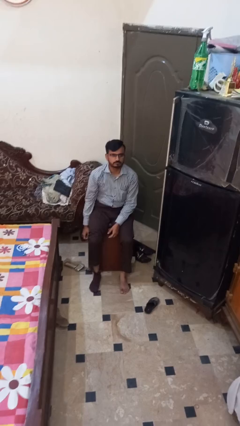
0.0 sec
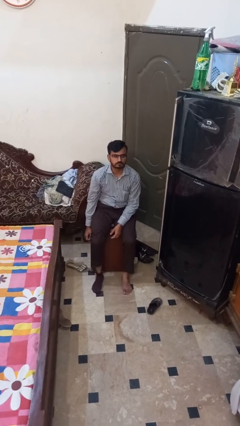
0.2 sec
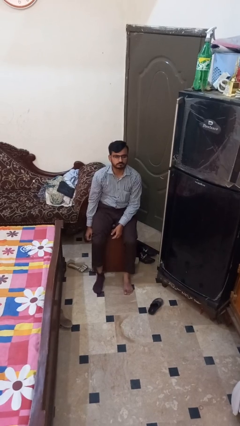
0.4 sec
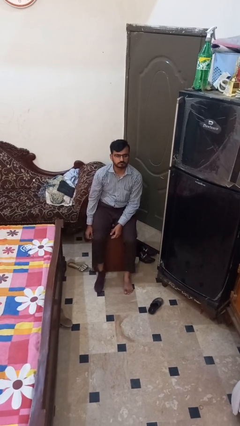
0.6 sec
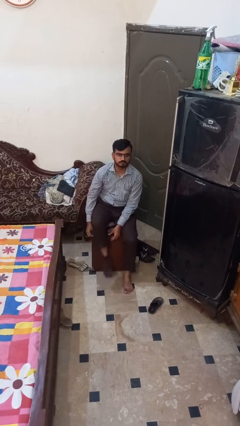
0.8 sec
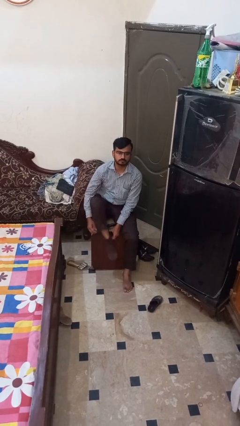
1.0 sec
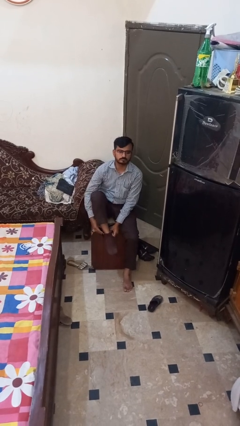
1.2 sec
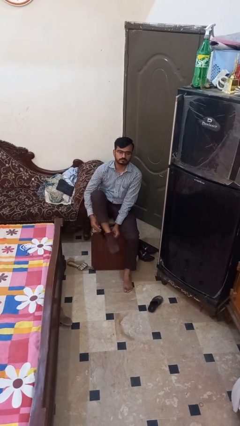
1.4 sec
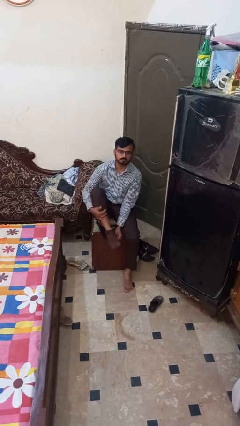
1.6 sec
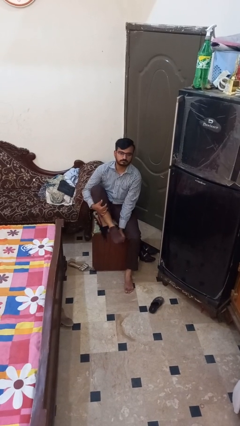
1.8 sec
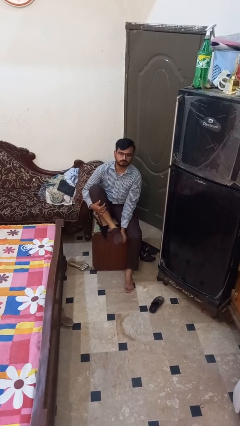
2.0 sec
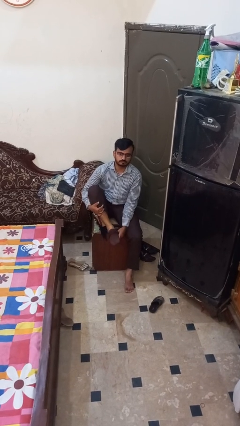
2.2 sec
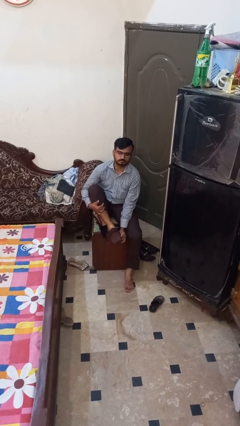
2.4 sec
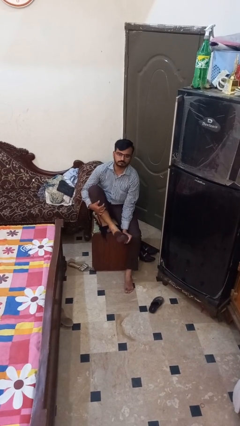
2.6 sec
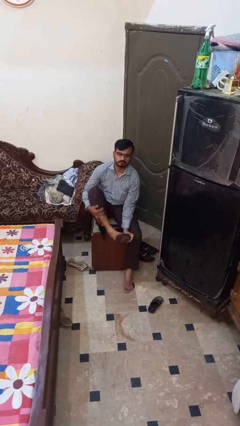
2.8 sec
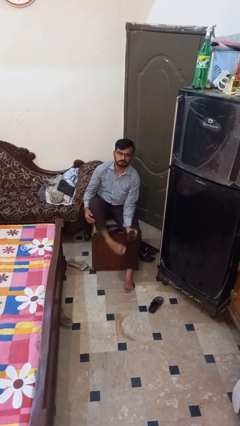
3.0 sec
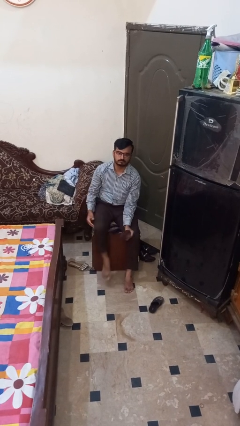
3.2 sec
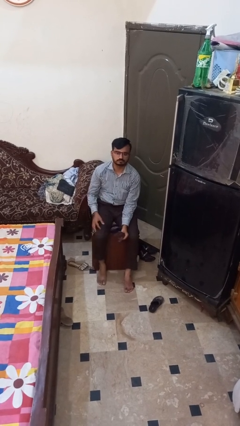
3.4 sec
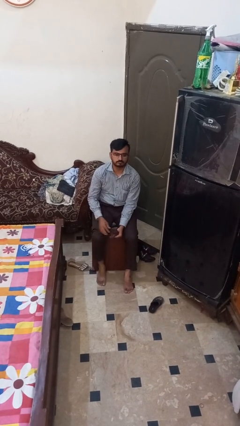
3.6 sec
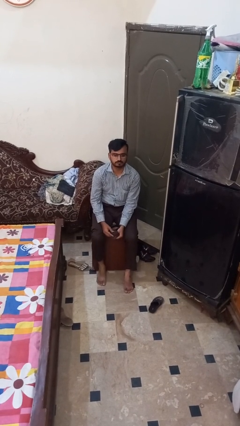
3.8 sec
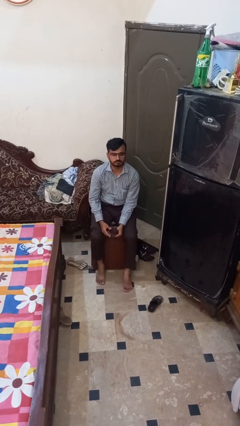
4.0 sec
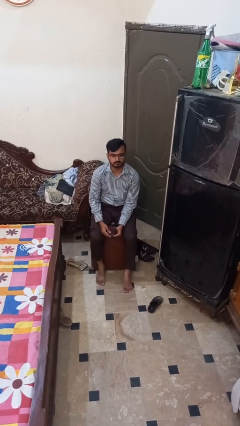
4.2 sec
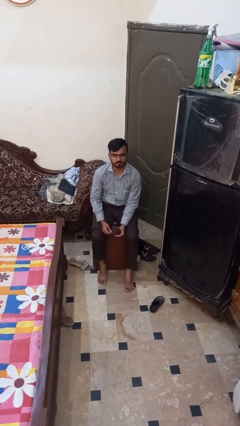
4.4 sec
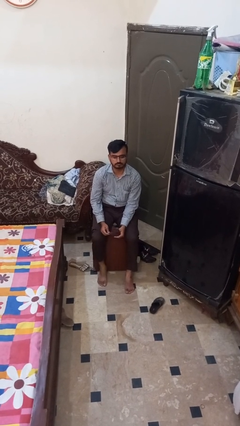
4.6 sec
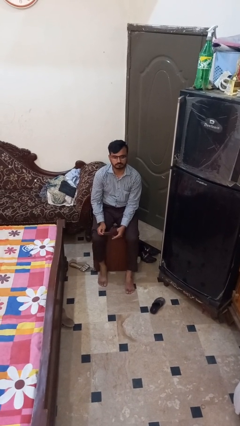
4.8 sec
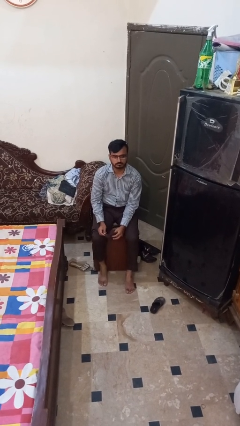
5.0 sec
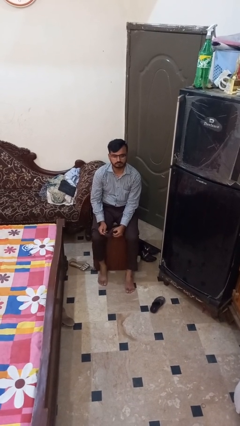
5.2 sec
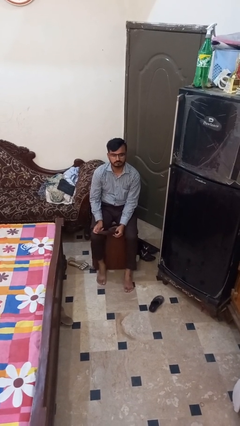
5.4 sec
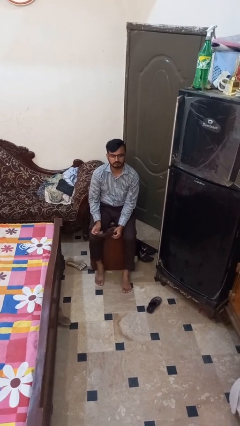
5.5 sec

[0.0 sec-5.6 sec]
person takes off socks

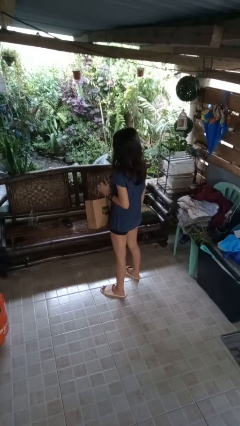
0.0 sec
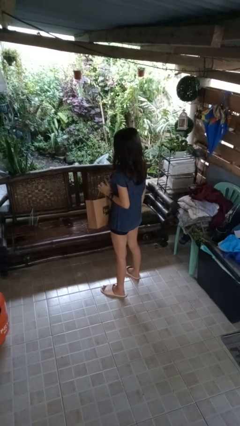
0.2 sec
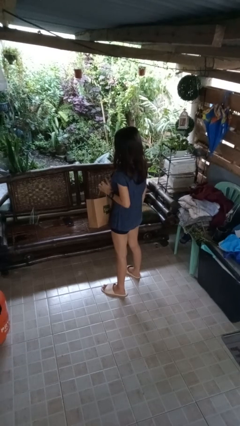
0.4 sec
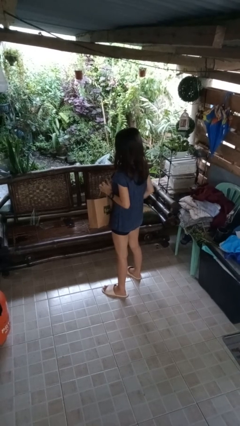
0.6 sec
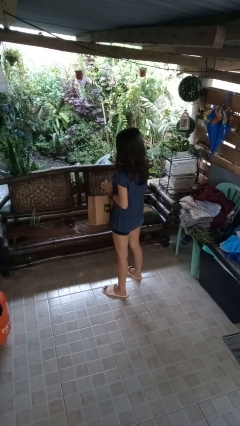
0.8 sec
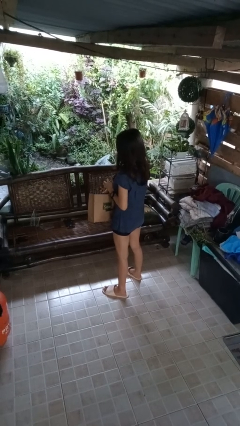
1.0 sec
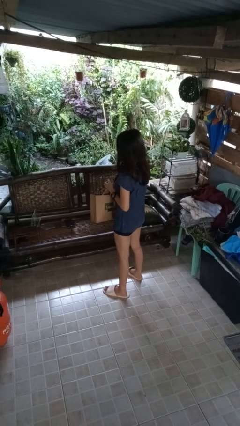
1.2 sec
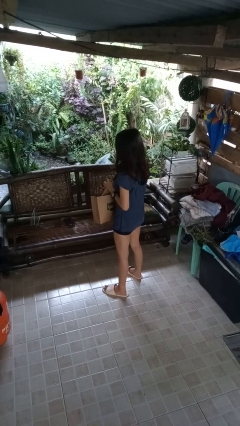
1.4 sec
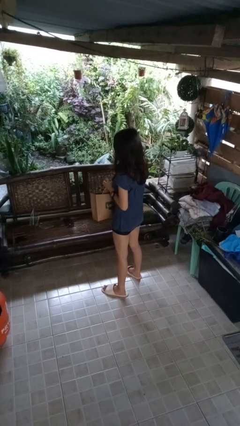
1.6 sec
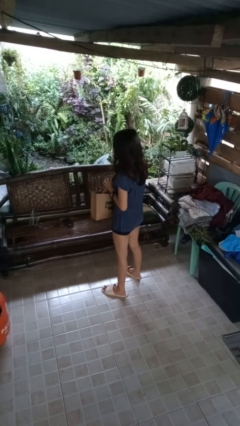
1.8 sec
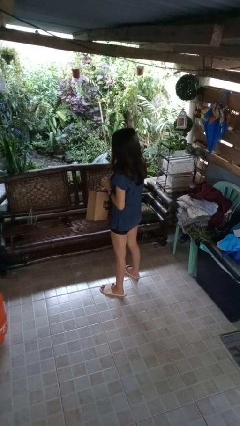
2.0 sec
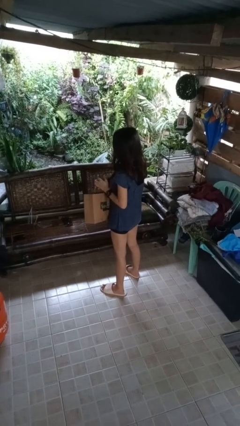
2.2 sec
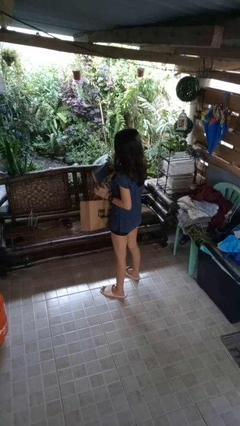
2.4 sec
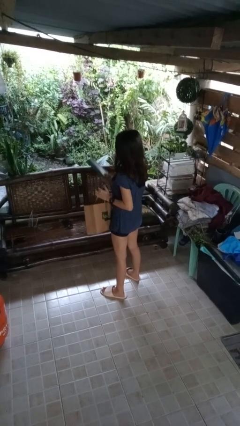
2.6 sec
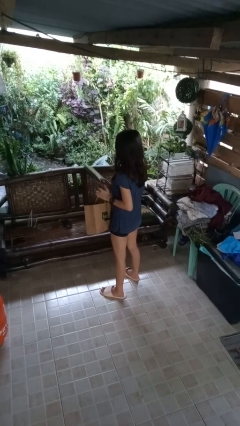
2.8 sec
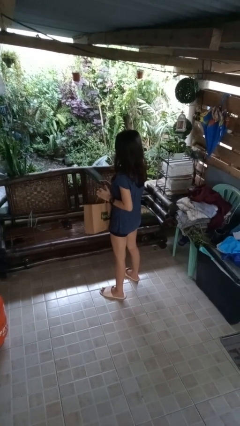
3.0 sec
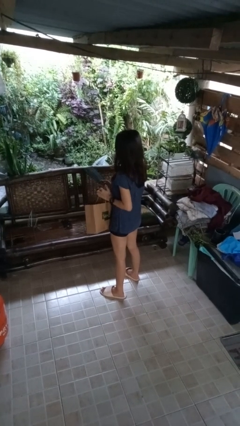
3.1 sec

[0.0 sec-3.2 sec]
person takes object from bag

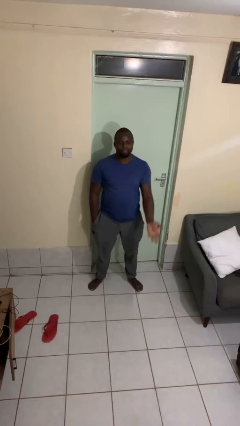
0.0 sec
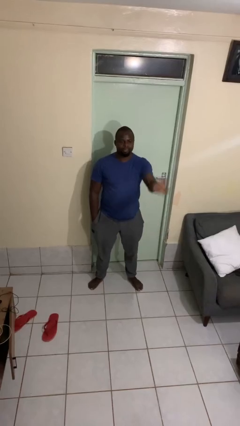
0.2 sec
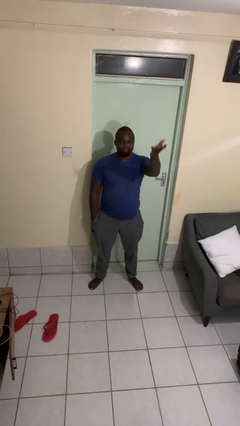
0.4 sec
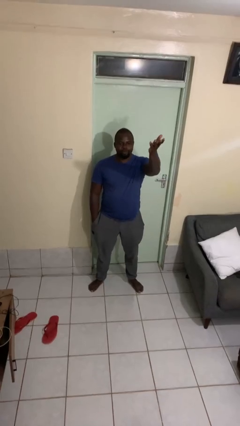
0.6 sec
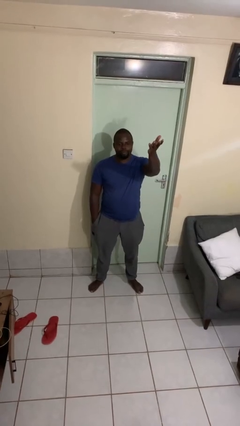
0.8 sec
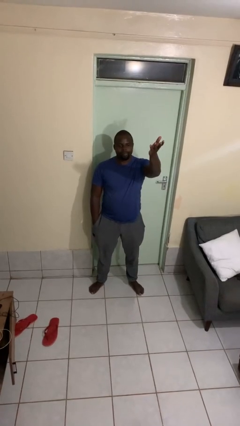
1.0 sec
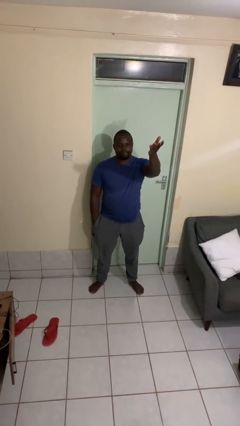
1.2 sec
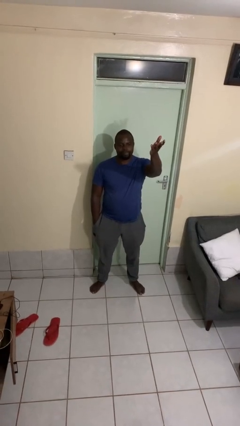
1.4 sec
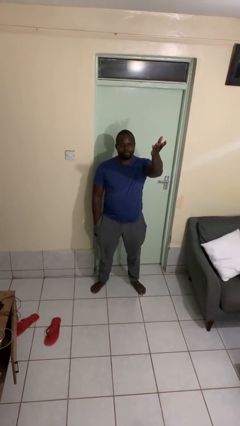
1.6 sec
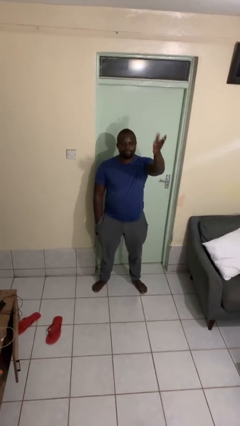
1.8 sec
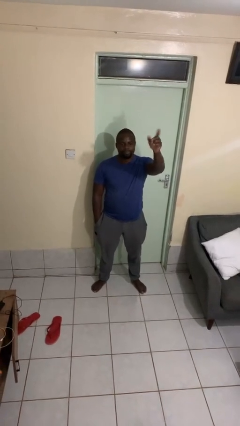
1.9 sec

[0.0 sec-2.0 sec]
person gestures swipe up

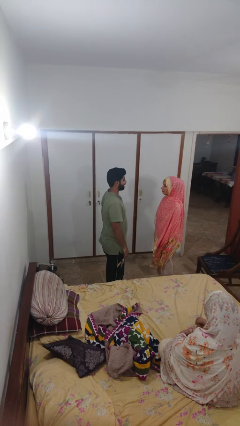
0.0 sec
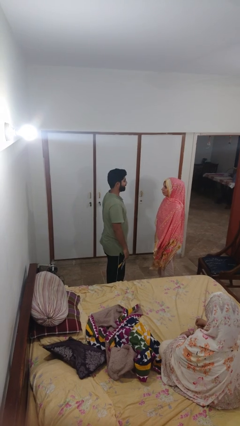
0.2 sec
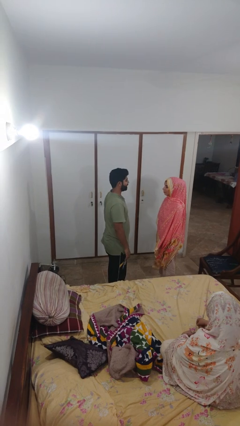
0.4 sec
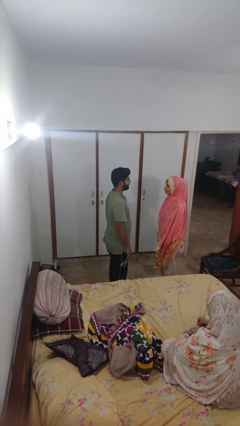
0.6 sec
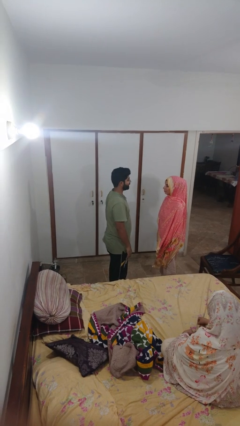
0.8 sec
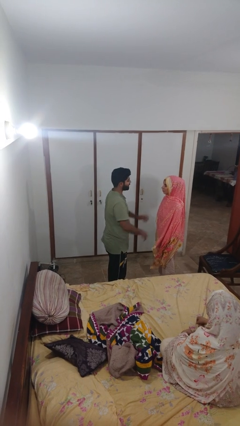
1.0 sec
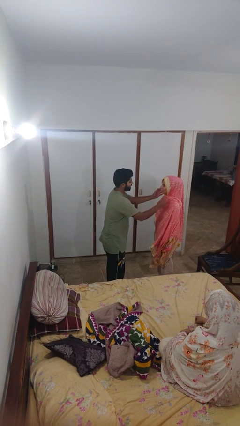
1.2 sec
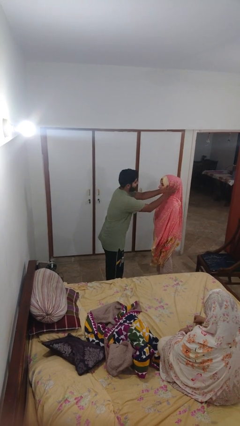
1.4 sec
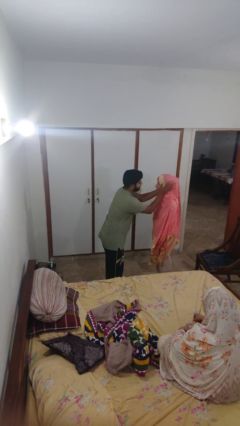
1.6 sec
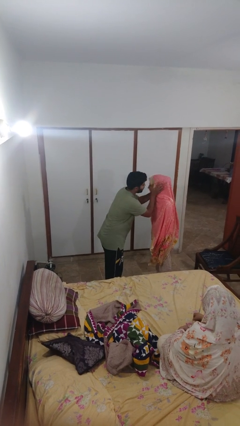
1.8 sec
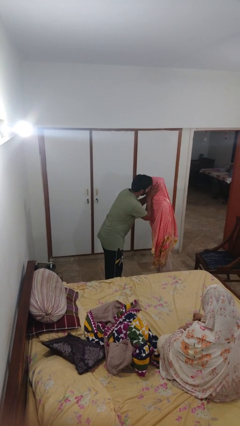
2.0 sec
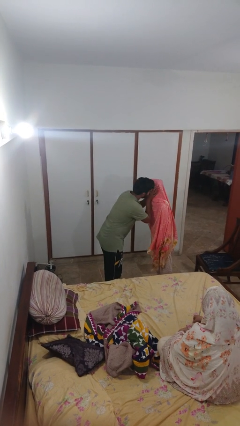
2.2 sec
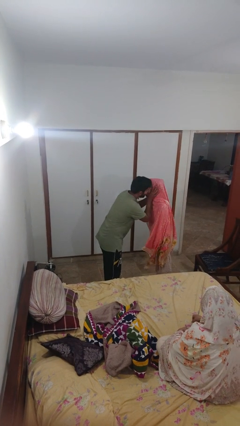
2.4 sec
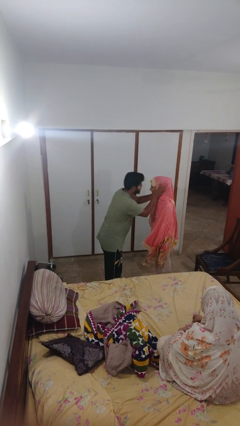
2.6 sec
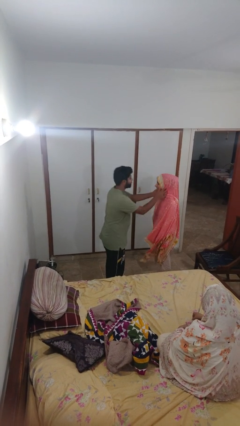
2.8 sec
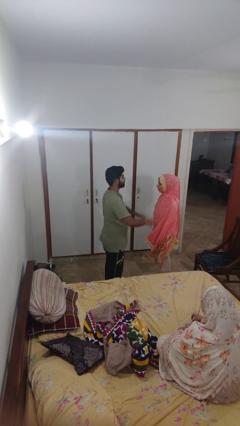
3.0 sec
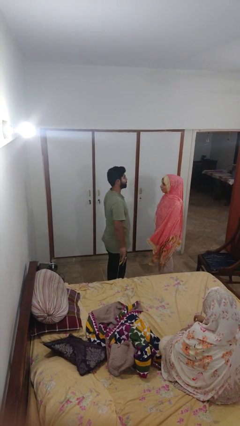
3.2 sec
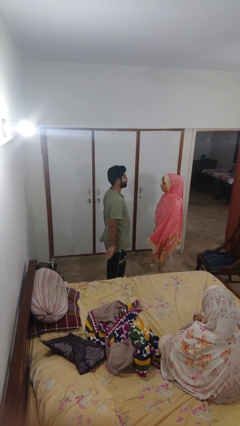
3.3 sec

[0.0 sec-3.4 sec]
person kisses cheek of person

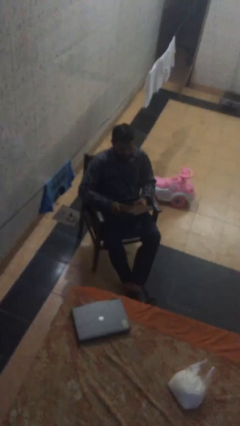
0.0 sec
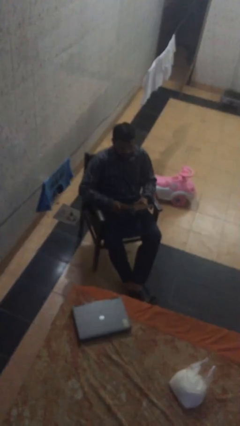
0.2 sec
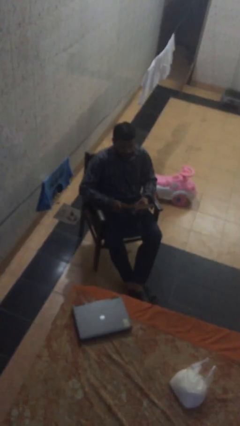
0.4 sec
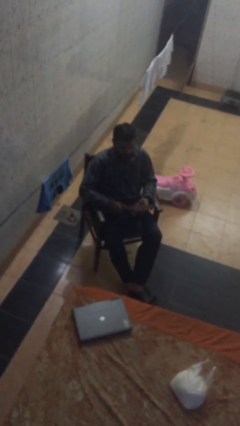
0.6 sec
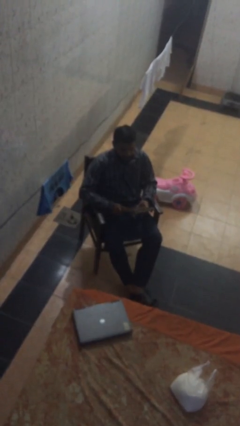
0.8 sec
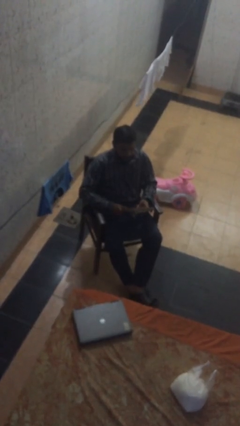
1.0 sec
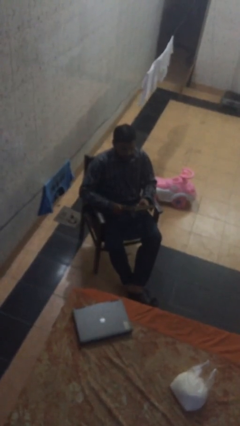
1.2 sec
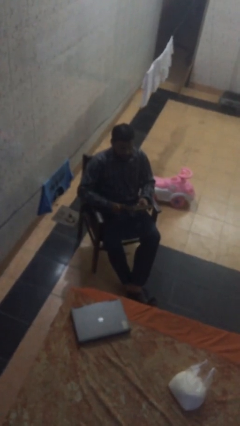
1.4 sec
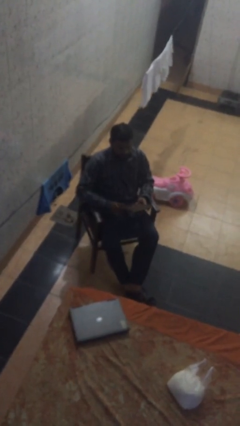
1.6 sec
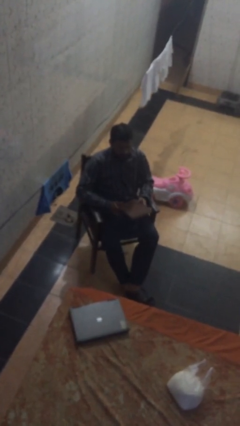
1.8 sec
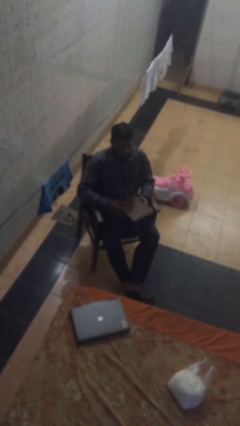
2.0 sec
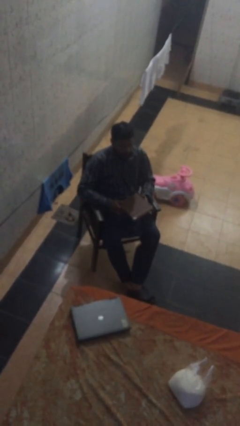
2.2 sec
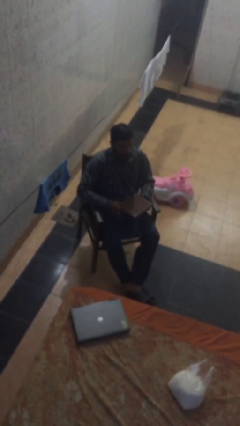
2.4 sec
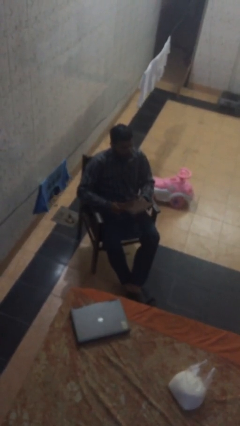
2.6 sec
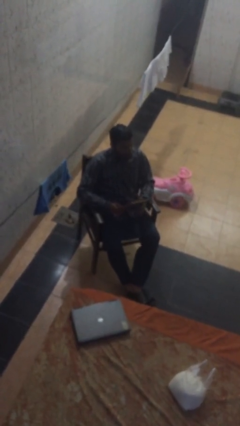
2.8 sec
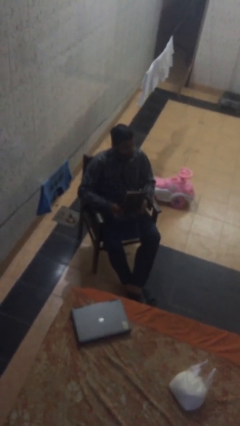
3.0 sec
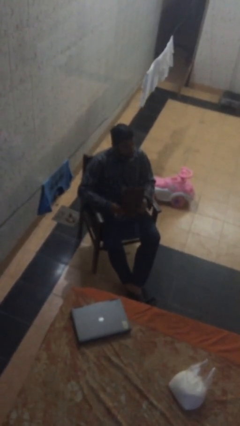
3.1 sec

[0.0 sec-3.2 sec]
person sits down
